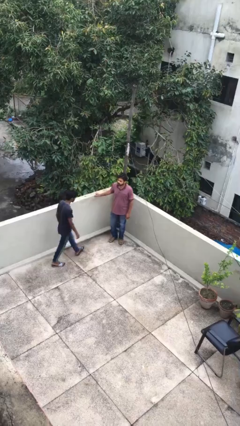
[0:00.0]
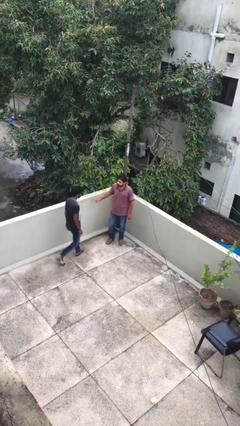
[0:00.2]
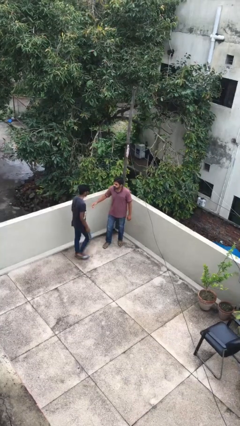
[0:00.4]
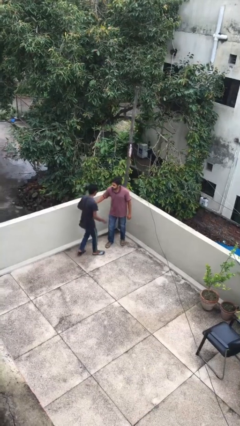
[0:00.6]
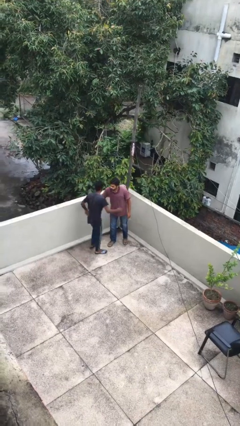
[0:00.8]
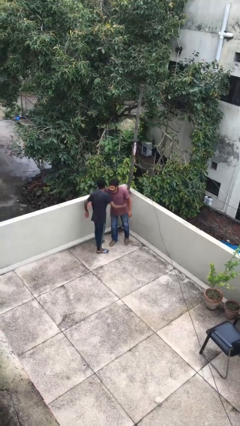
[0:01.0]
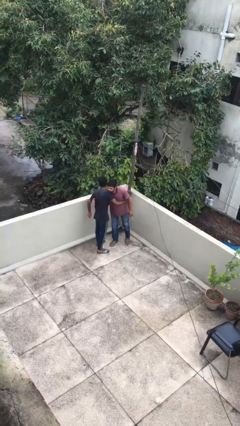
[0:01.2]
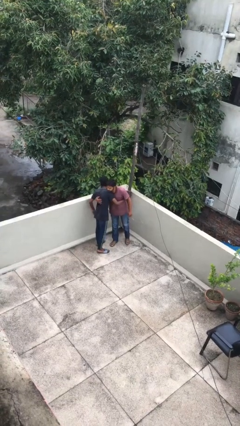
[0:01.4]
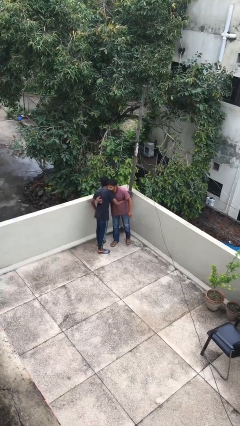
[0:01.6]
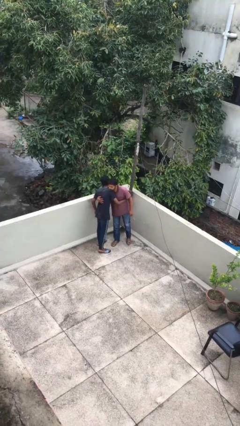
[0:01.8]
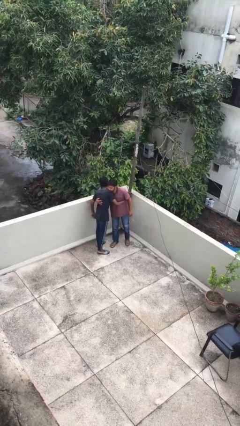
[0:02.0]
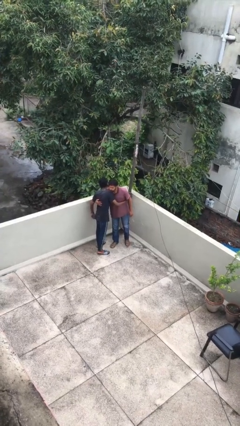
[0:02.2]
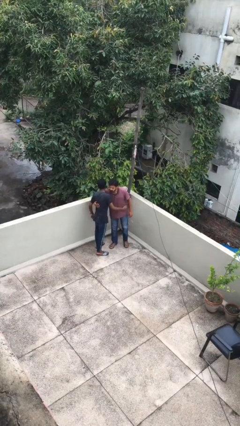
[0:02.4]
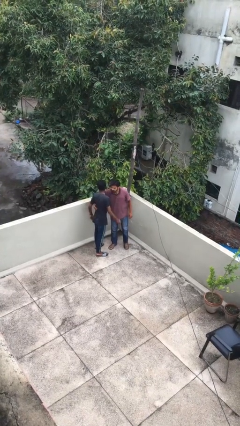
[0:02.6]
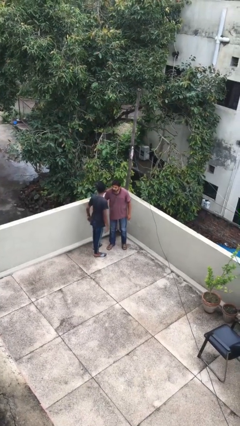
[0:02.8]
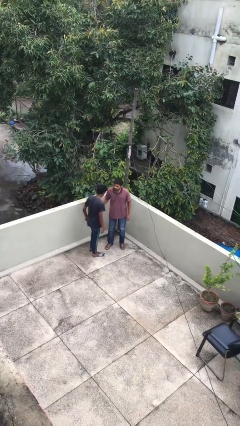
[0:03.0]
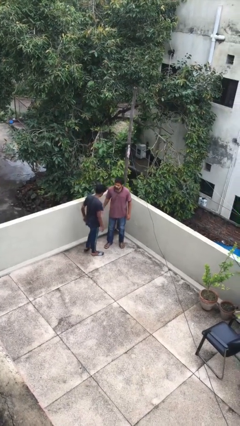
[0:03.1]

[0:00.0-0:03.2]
person embraces person

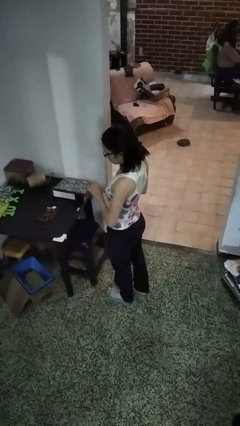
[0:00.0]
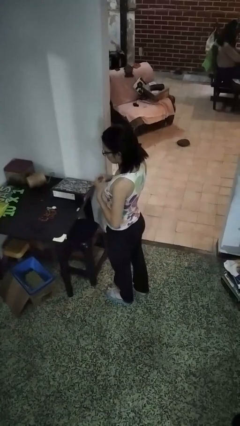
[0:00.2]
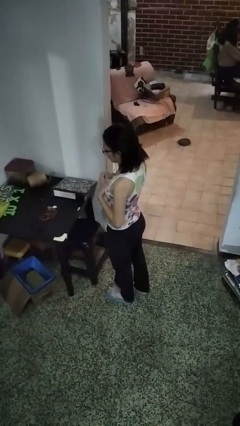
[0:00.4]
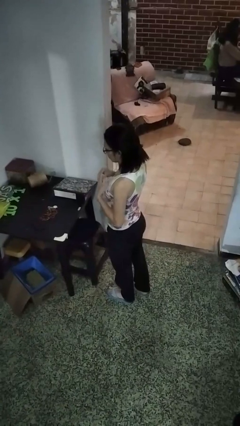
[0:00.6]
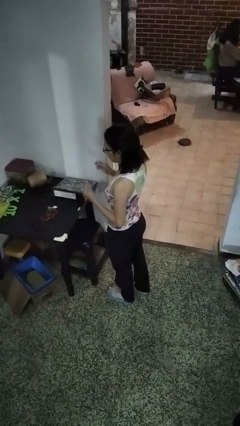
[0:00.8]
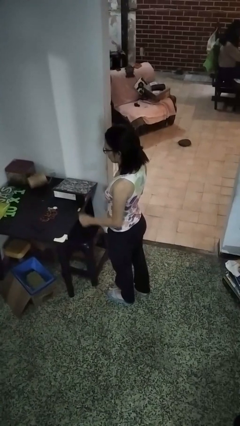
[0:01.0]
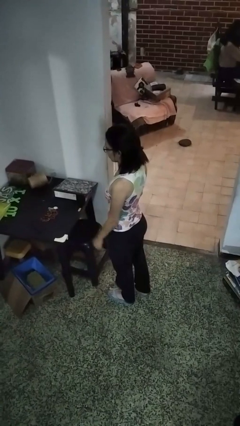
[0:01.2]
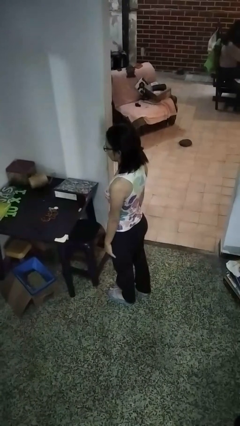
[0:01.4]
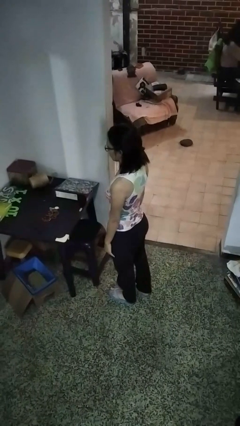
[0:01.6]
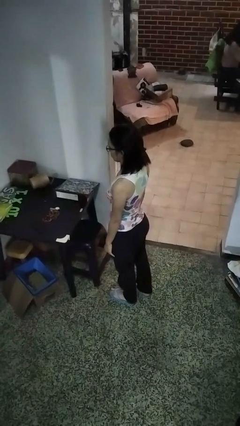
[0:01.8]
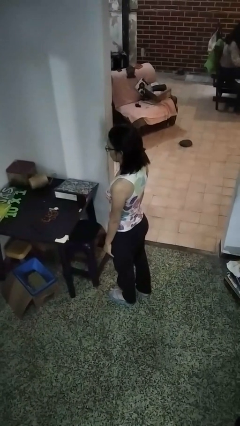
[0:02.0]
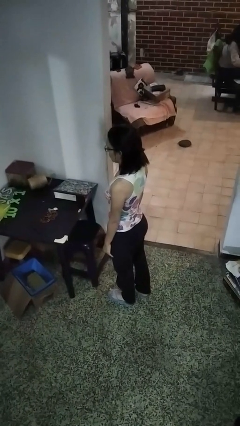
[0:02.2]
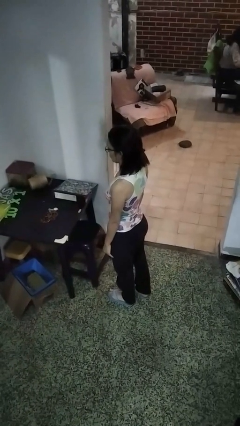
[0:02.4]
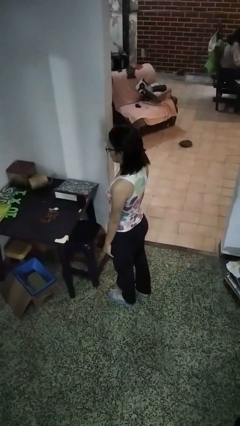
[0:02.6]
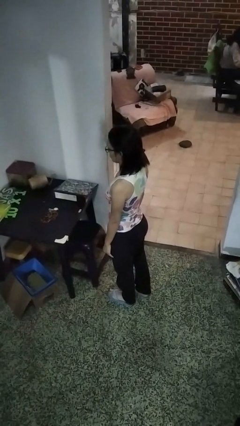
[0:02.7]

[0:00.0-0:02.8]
person takes off ring

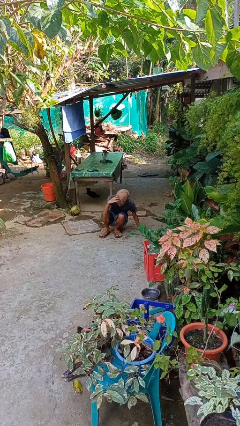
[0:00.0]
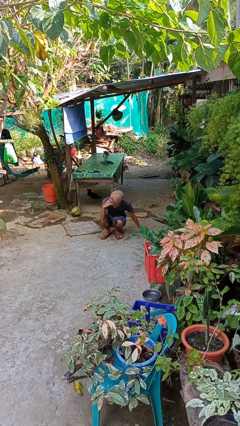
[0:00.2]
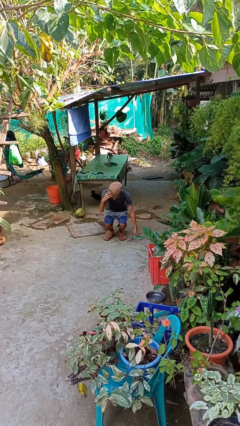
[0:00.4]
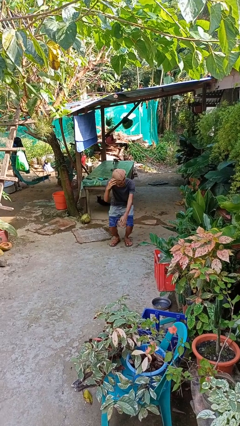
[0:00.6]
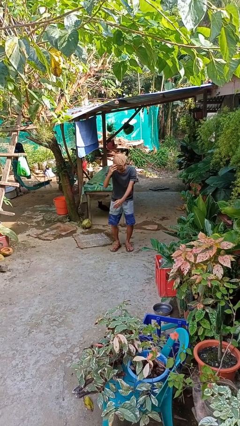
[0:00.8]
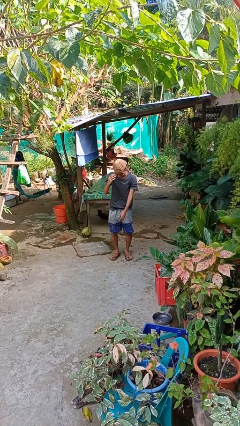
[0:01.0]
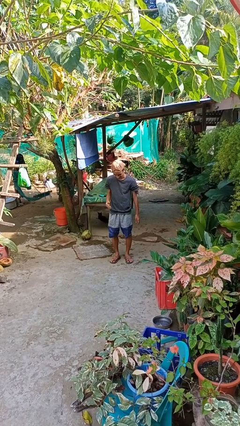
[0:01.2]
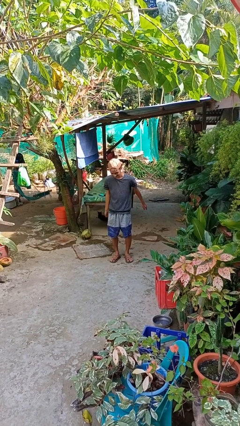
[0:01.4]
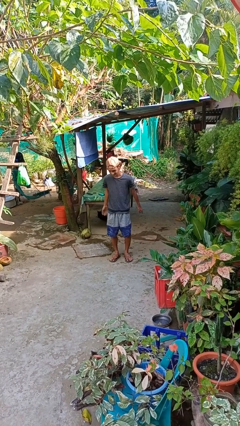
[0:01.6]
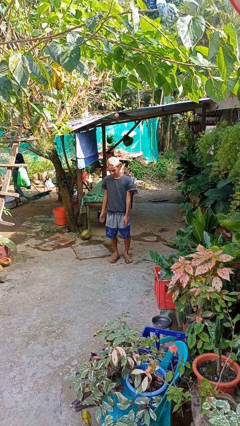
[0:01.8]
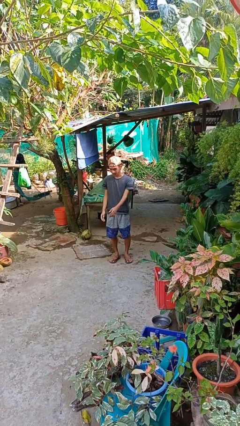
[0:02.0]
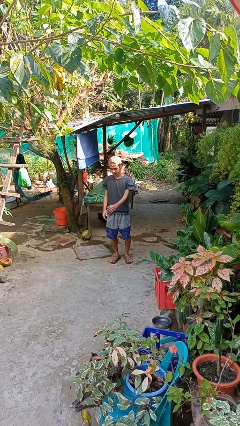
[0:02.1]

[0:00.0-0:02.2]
person stands up from floor

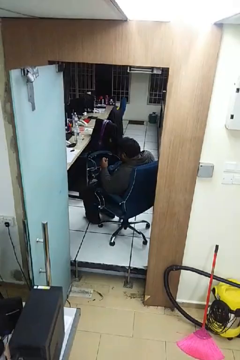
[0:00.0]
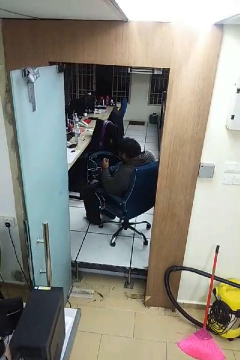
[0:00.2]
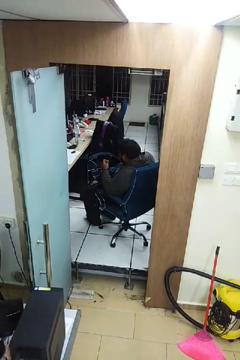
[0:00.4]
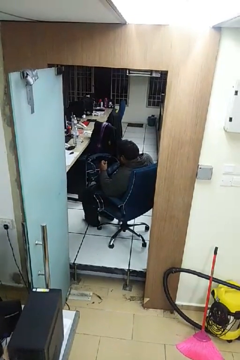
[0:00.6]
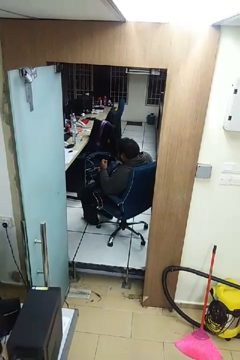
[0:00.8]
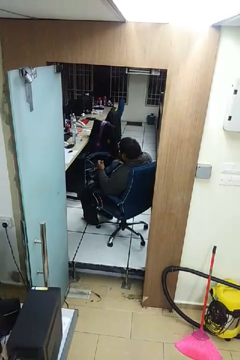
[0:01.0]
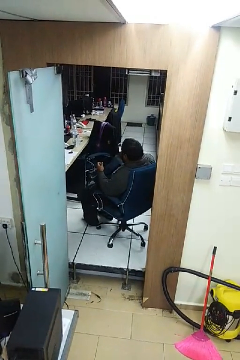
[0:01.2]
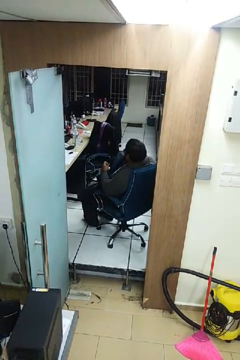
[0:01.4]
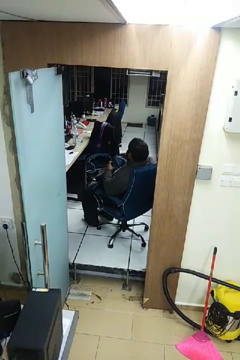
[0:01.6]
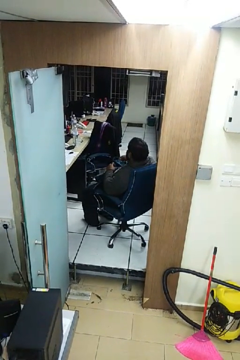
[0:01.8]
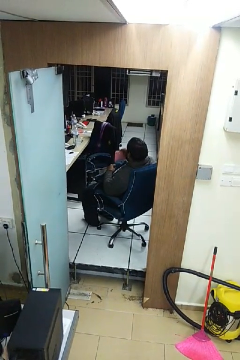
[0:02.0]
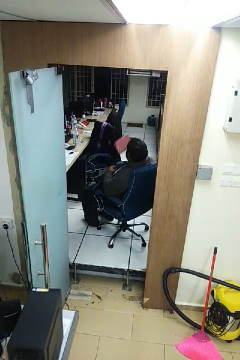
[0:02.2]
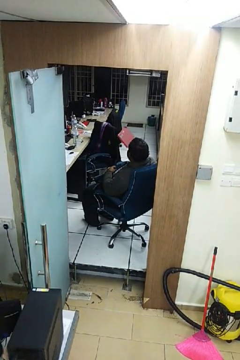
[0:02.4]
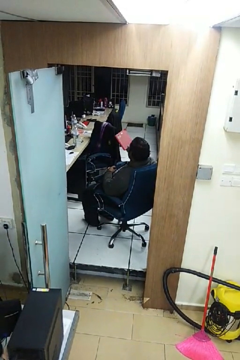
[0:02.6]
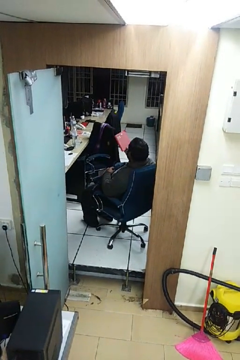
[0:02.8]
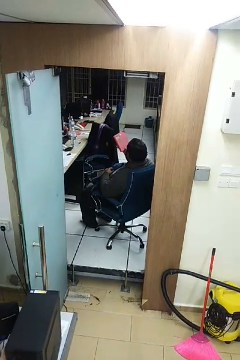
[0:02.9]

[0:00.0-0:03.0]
person takes object from backpack

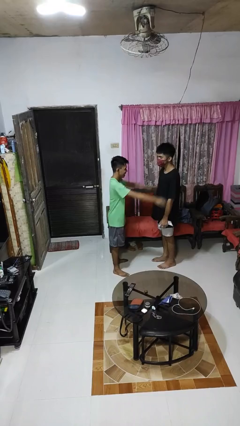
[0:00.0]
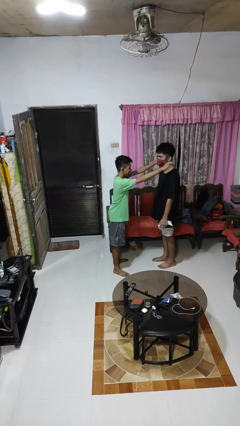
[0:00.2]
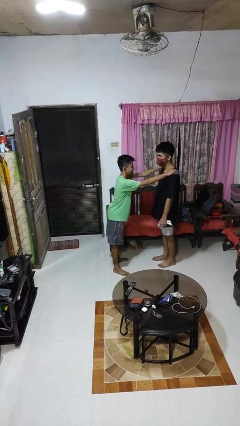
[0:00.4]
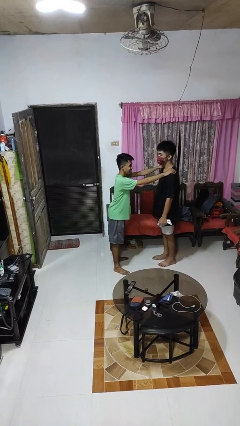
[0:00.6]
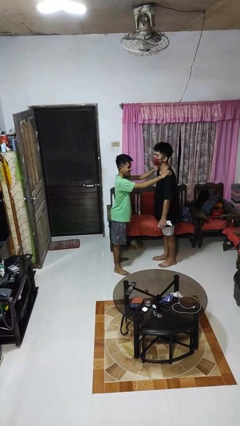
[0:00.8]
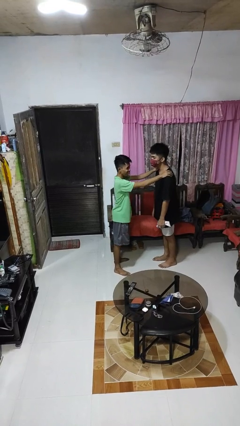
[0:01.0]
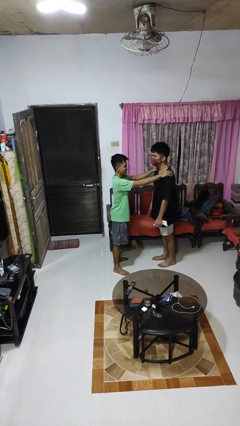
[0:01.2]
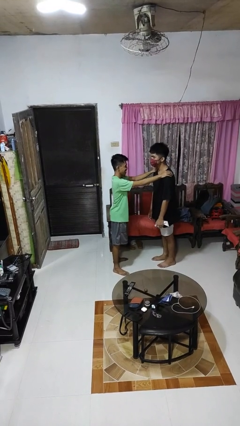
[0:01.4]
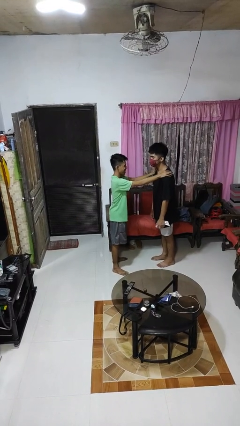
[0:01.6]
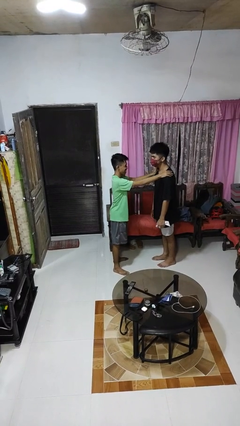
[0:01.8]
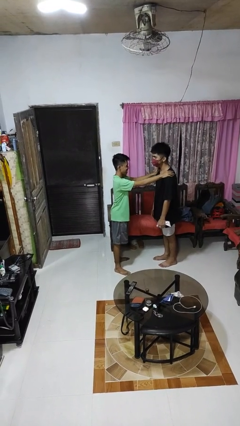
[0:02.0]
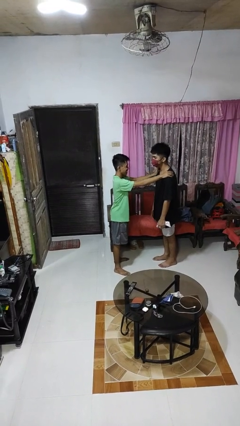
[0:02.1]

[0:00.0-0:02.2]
person grabs person by shoulder

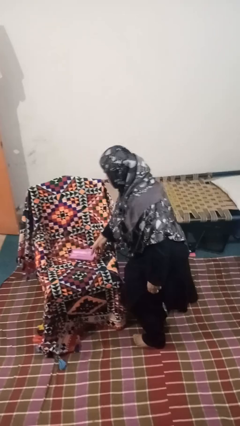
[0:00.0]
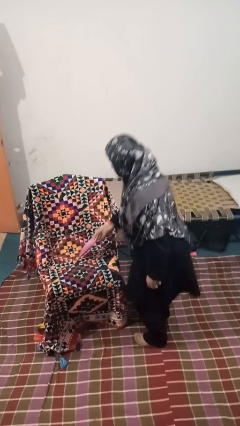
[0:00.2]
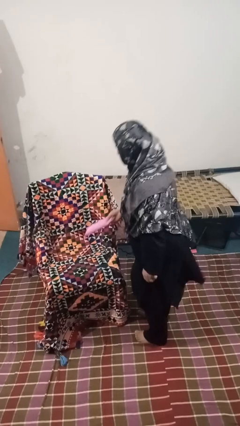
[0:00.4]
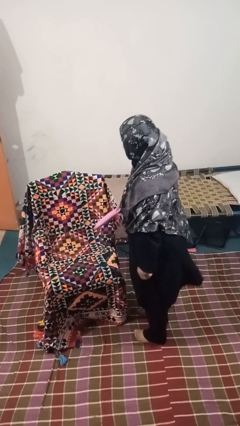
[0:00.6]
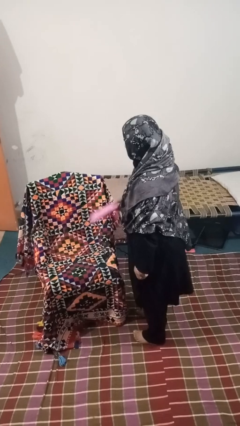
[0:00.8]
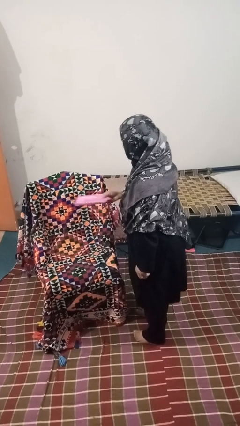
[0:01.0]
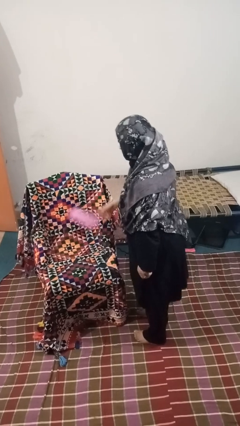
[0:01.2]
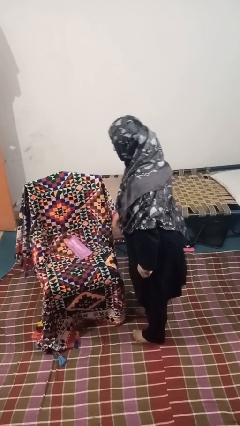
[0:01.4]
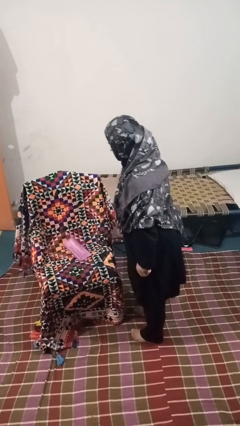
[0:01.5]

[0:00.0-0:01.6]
person picks up object from couch

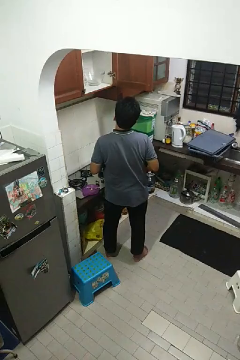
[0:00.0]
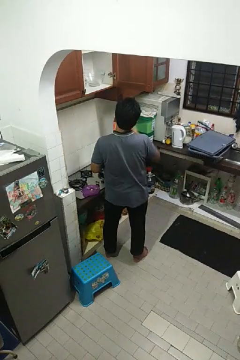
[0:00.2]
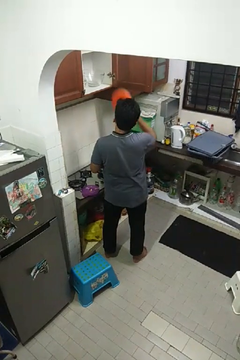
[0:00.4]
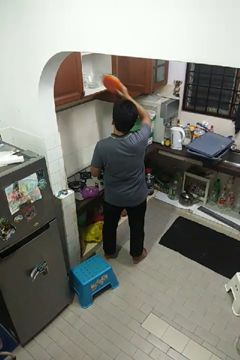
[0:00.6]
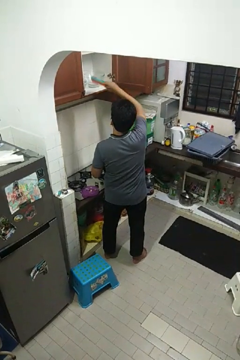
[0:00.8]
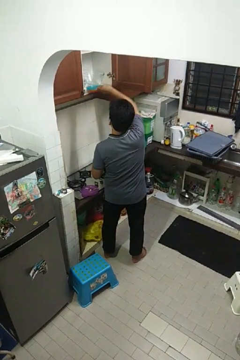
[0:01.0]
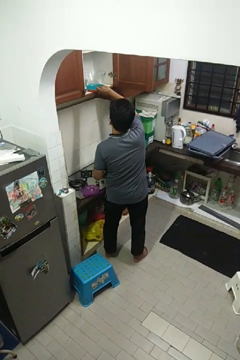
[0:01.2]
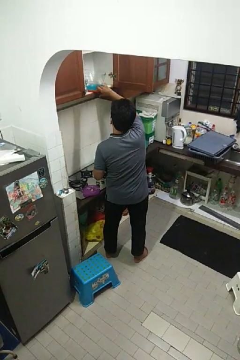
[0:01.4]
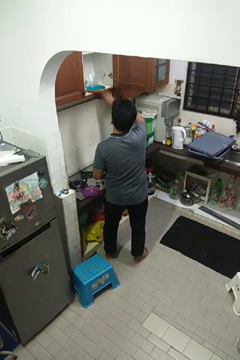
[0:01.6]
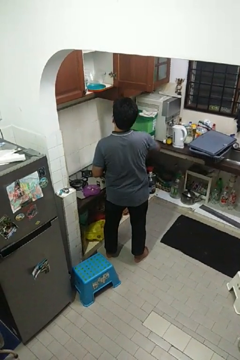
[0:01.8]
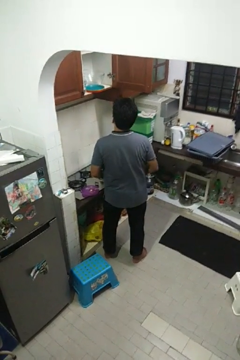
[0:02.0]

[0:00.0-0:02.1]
person puts object in cabinet

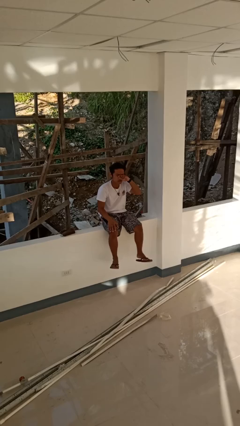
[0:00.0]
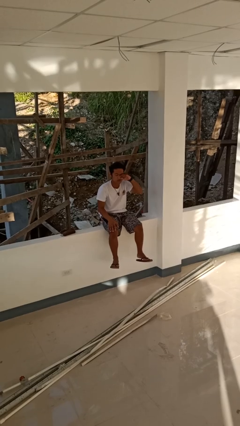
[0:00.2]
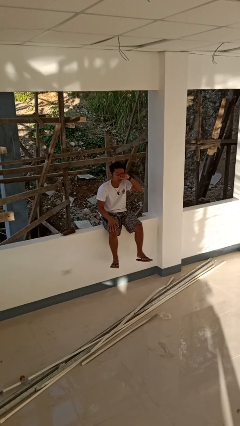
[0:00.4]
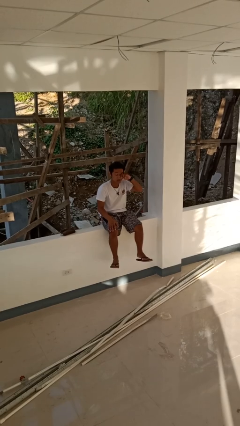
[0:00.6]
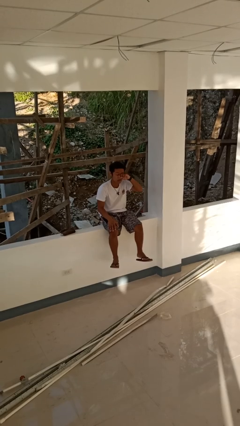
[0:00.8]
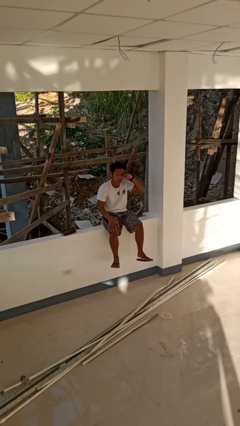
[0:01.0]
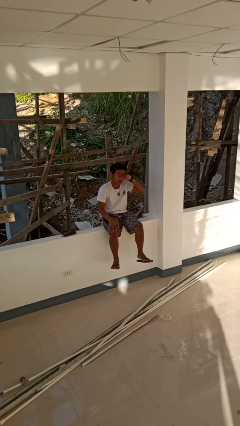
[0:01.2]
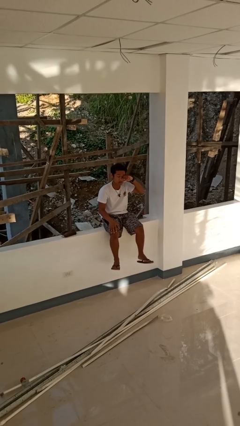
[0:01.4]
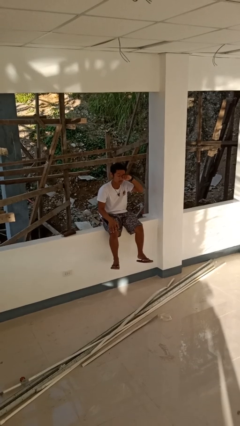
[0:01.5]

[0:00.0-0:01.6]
person rubs eyes
